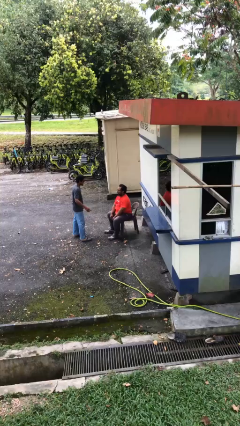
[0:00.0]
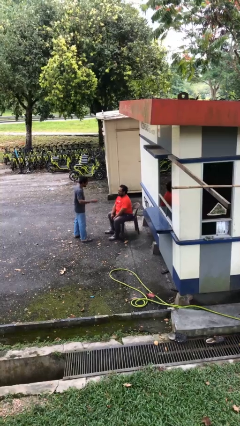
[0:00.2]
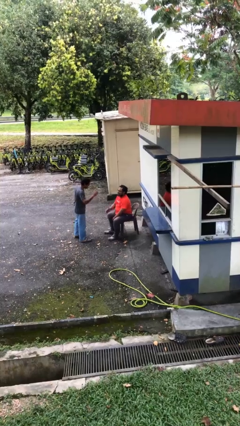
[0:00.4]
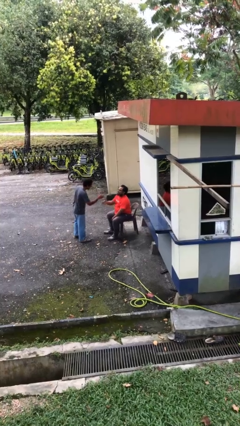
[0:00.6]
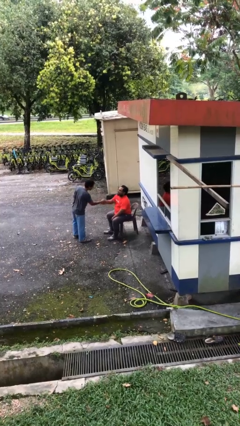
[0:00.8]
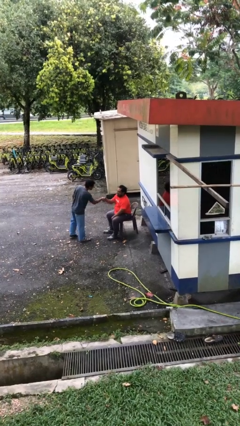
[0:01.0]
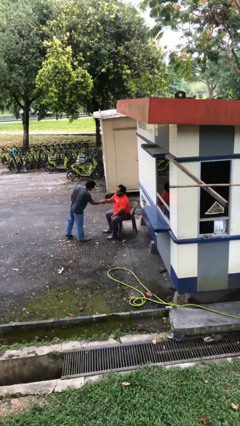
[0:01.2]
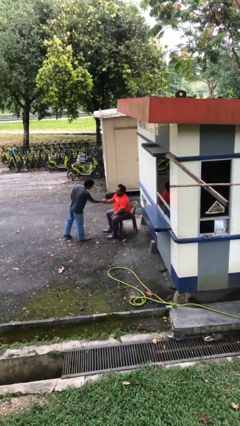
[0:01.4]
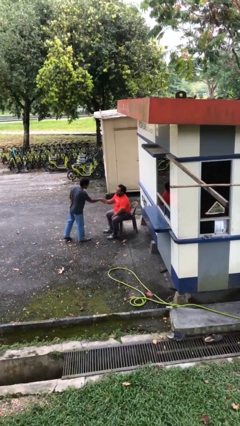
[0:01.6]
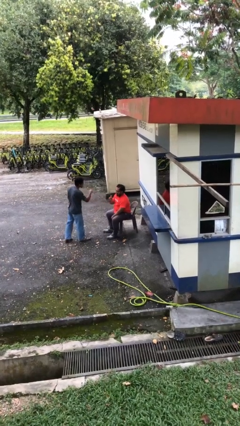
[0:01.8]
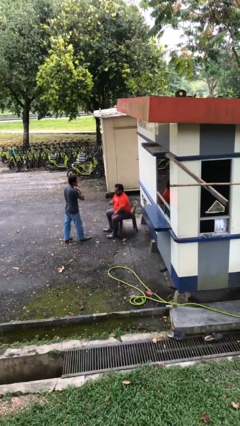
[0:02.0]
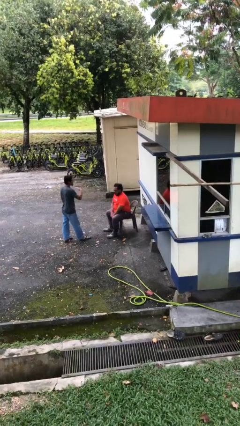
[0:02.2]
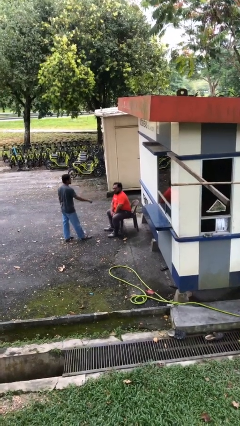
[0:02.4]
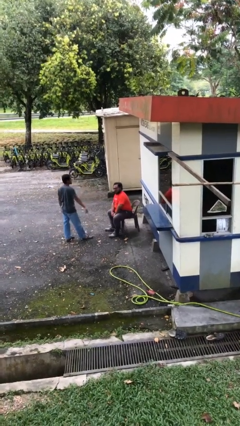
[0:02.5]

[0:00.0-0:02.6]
person shakes hand

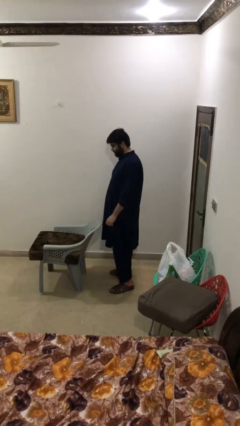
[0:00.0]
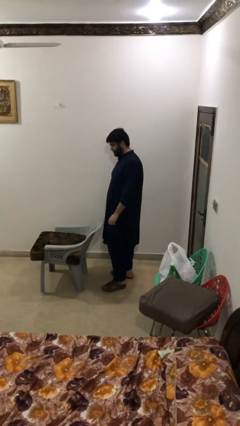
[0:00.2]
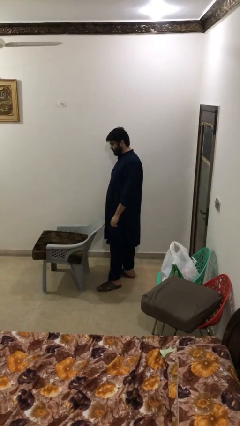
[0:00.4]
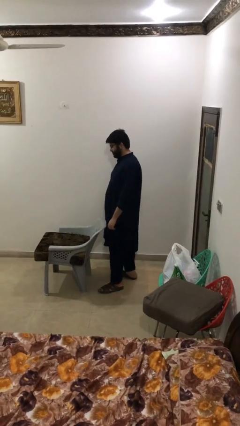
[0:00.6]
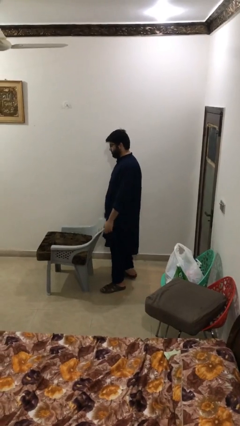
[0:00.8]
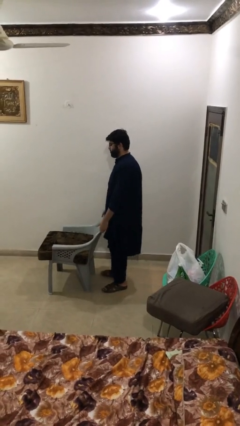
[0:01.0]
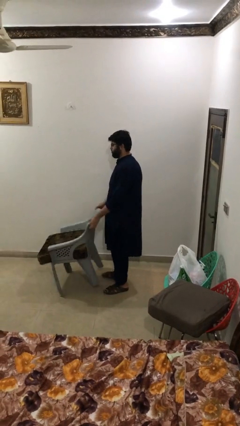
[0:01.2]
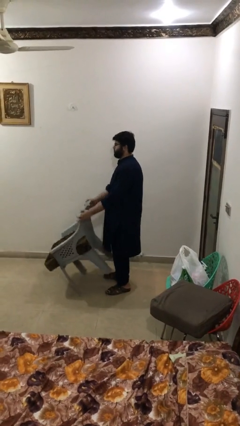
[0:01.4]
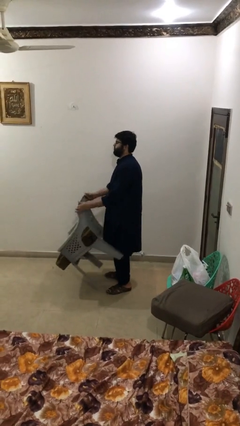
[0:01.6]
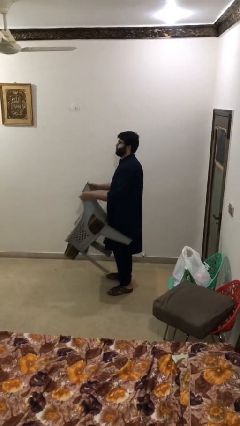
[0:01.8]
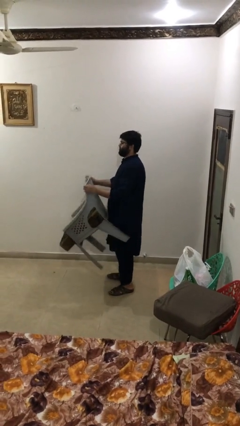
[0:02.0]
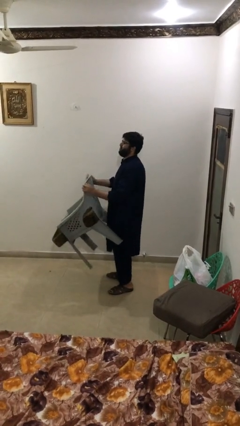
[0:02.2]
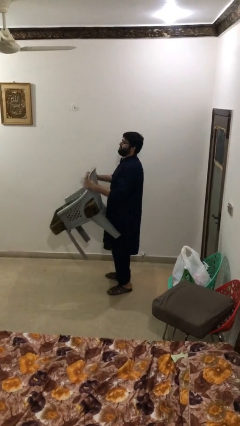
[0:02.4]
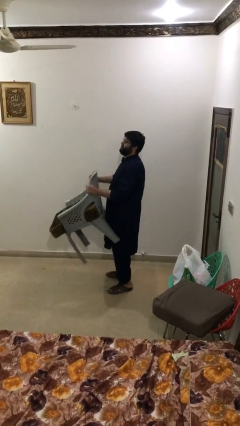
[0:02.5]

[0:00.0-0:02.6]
person picks up object from floor

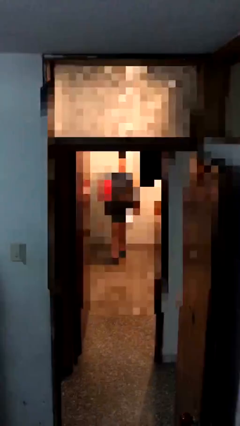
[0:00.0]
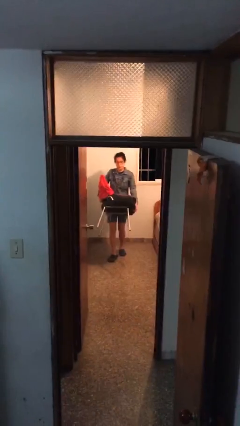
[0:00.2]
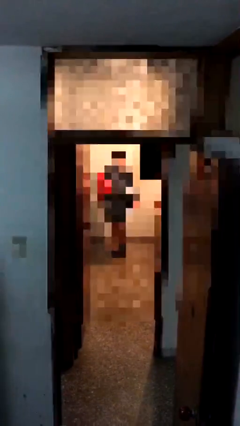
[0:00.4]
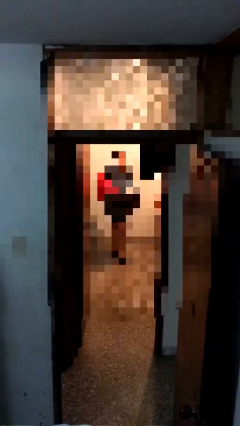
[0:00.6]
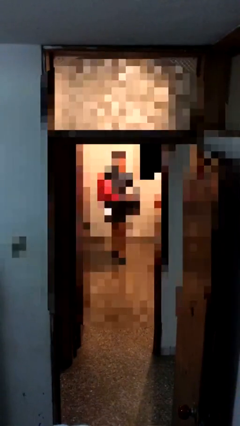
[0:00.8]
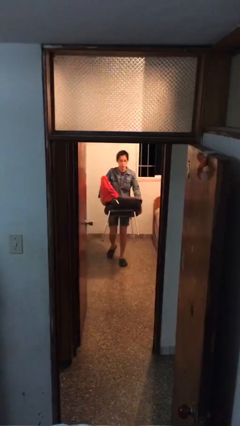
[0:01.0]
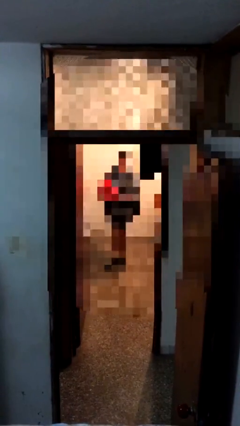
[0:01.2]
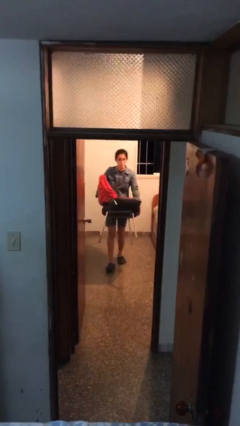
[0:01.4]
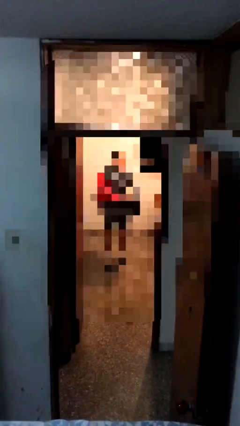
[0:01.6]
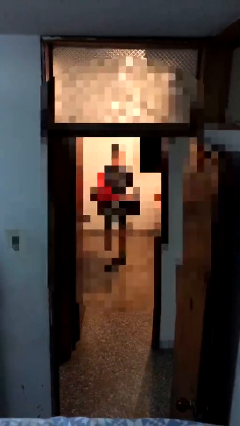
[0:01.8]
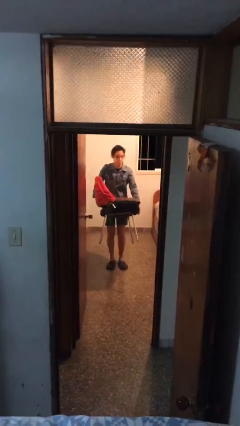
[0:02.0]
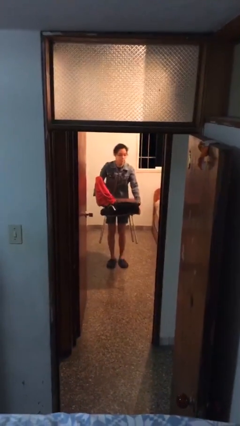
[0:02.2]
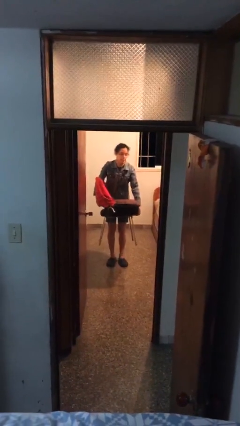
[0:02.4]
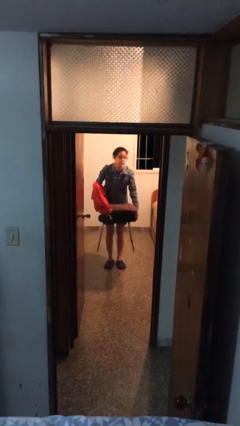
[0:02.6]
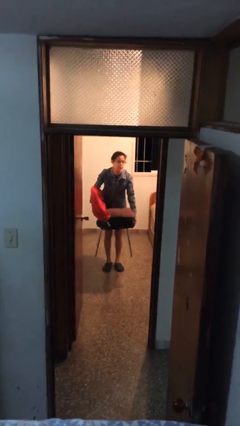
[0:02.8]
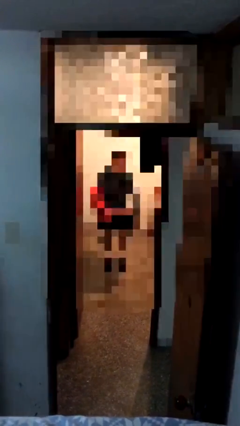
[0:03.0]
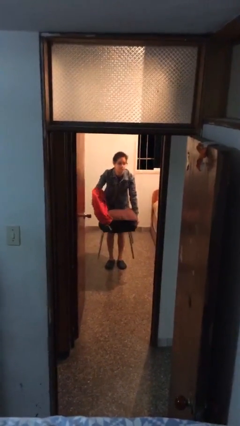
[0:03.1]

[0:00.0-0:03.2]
person carries heavy object

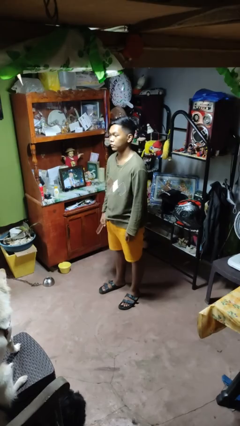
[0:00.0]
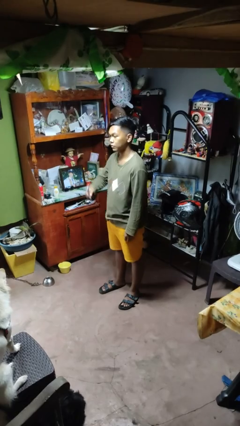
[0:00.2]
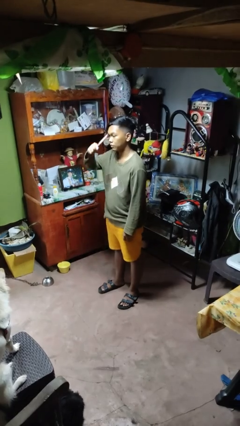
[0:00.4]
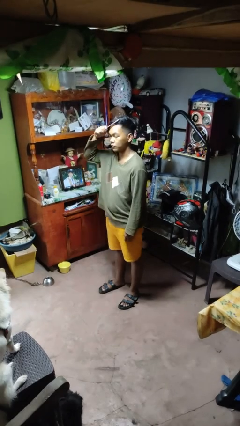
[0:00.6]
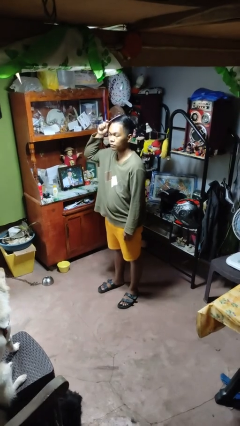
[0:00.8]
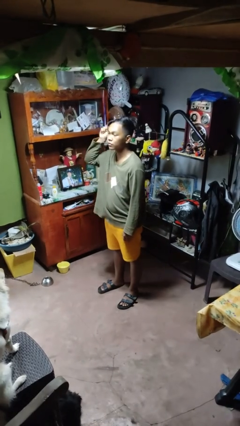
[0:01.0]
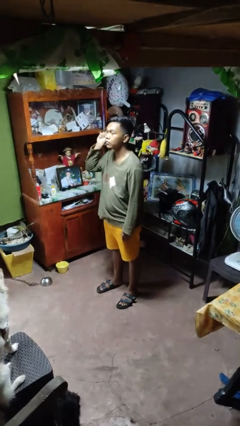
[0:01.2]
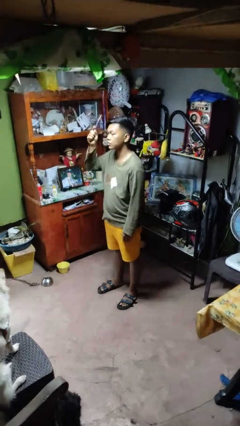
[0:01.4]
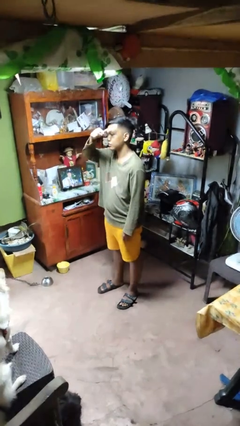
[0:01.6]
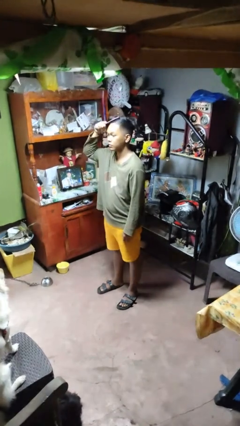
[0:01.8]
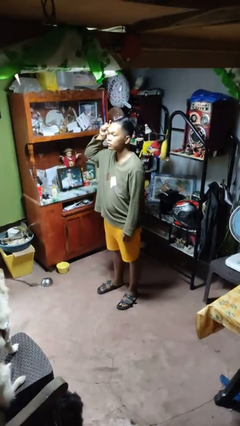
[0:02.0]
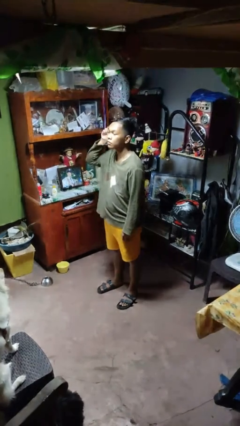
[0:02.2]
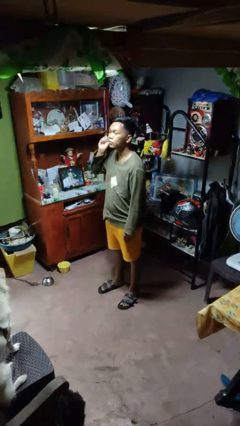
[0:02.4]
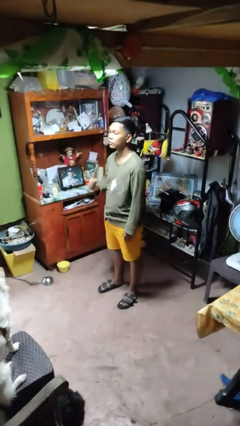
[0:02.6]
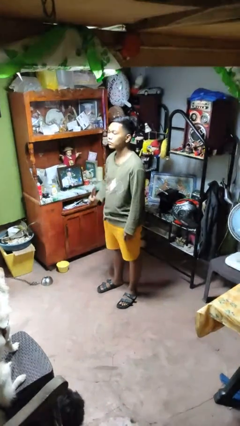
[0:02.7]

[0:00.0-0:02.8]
person brushes hair

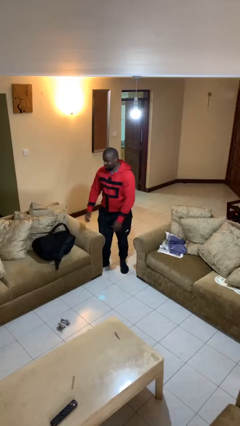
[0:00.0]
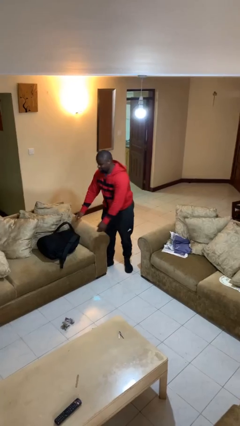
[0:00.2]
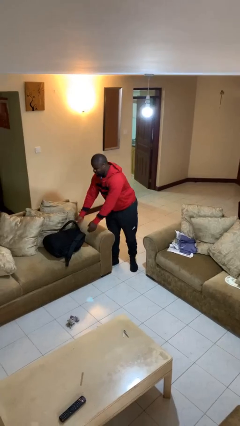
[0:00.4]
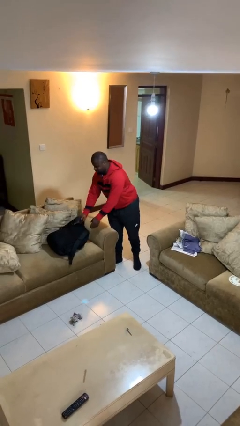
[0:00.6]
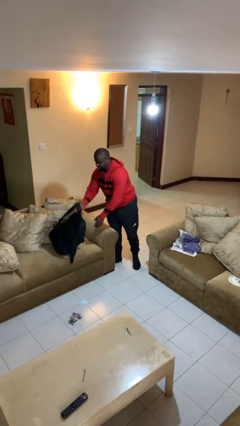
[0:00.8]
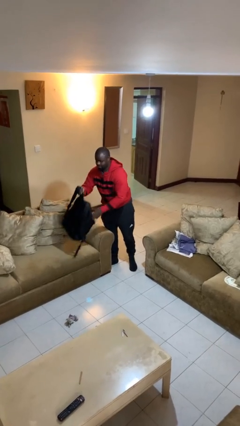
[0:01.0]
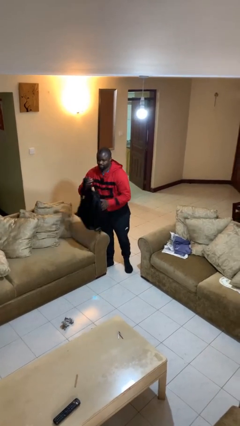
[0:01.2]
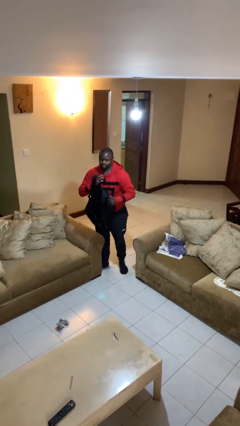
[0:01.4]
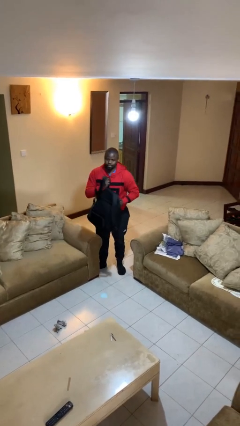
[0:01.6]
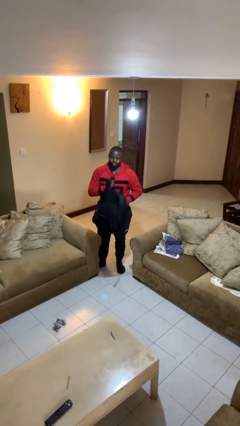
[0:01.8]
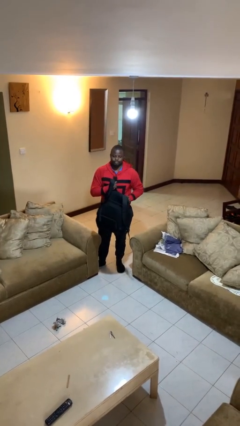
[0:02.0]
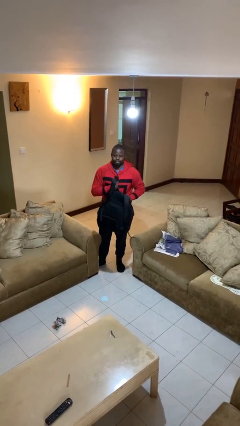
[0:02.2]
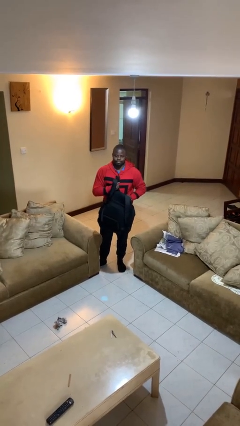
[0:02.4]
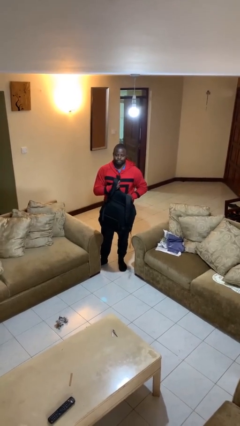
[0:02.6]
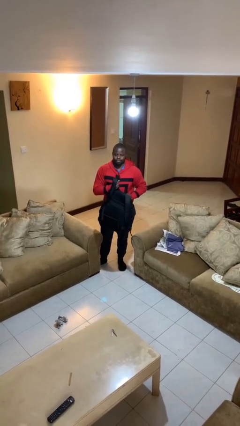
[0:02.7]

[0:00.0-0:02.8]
person picks up object from couch

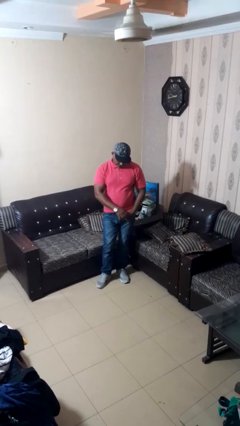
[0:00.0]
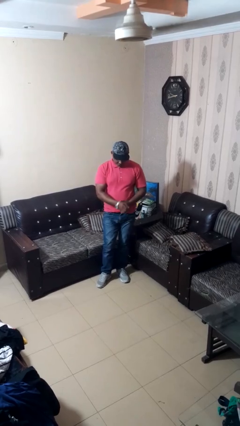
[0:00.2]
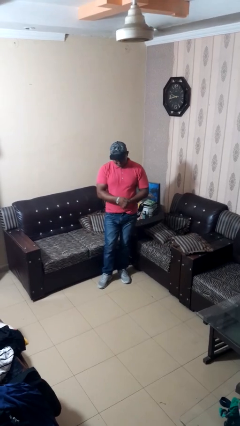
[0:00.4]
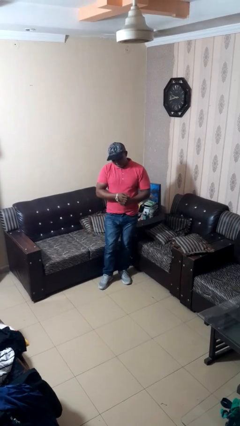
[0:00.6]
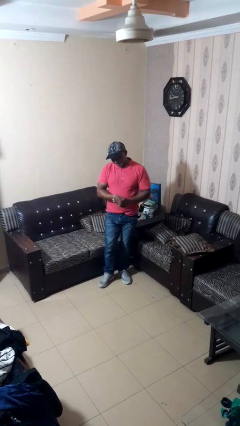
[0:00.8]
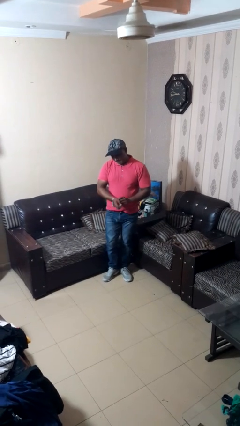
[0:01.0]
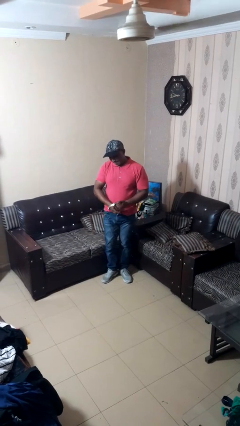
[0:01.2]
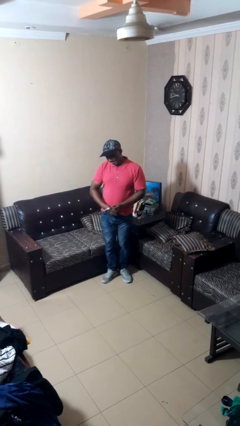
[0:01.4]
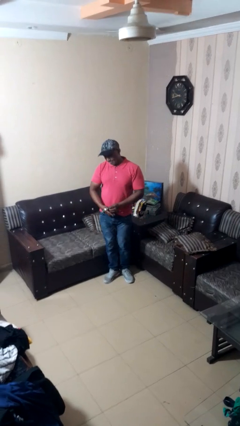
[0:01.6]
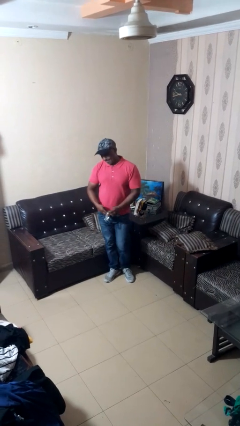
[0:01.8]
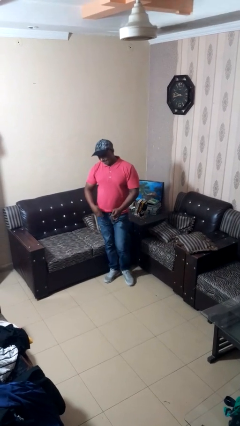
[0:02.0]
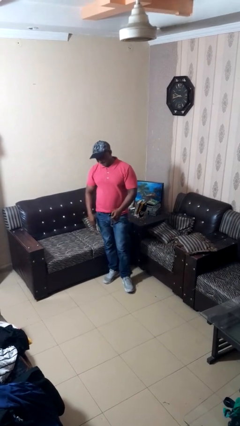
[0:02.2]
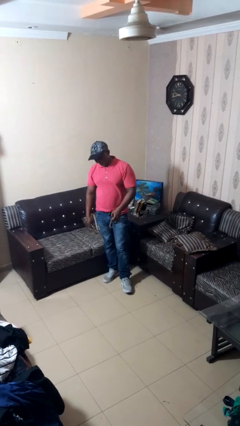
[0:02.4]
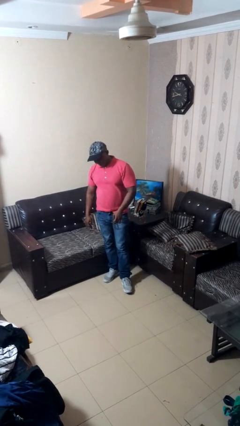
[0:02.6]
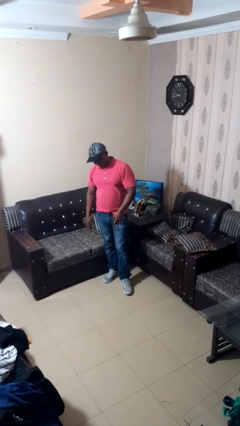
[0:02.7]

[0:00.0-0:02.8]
person takes off wristwatch

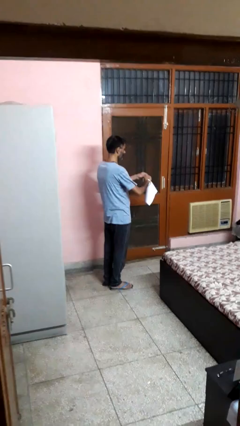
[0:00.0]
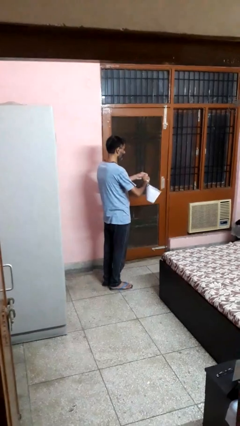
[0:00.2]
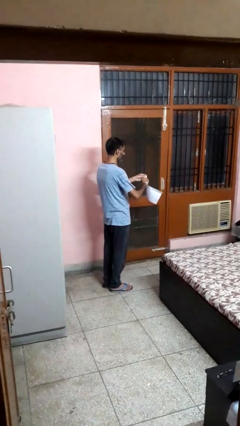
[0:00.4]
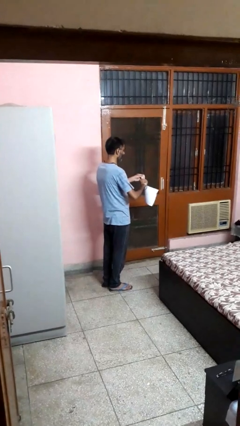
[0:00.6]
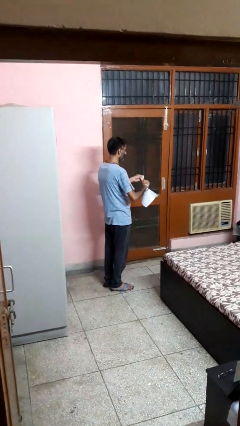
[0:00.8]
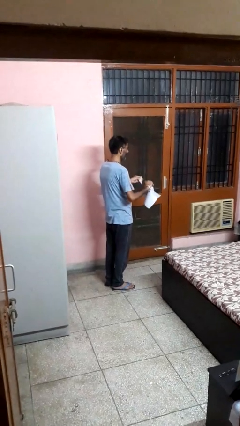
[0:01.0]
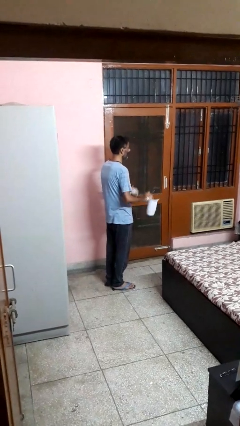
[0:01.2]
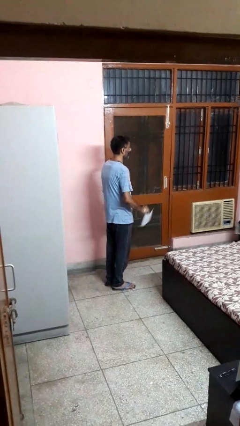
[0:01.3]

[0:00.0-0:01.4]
person tears paper
